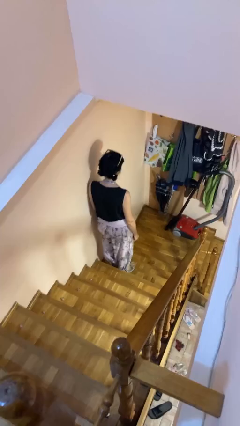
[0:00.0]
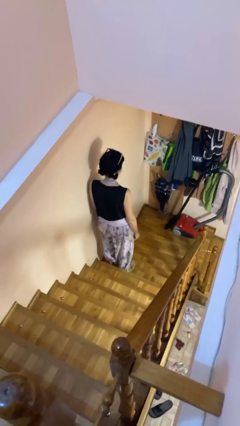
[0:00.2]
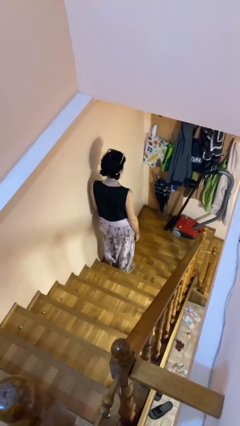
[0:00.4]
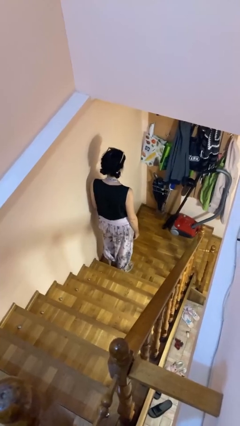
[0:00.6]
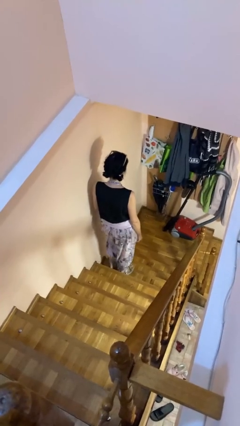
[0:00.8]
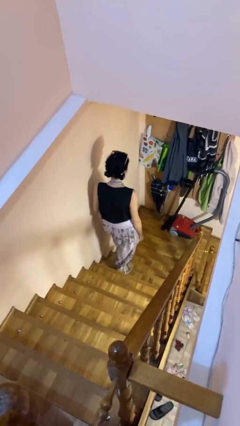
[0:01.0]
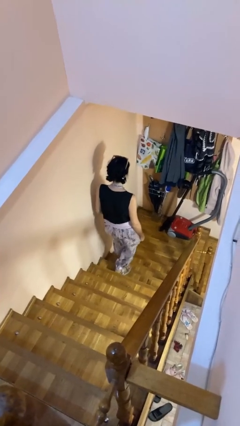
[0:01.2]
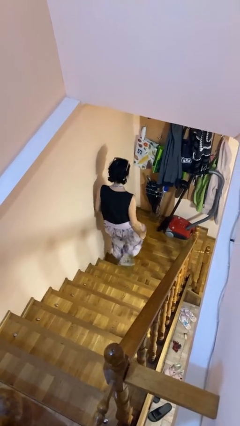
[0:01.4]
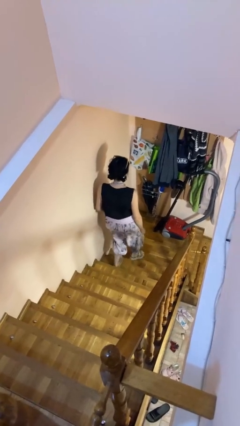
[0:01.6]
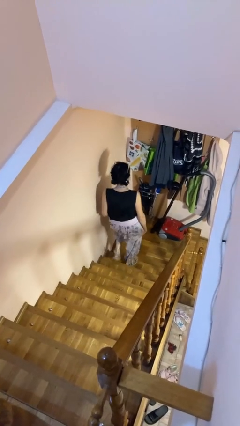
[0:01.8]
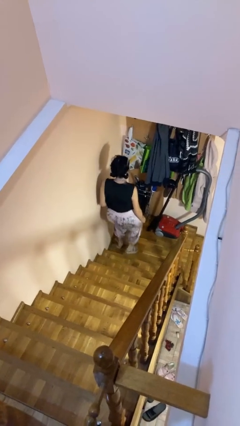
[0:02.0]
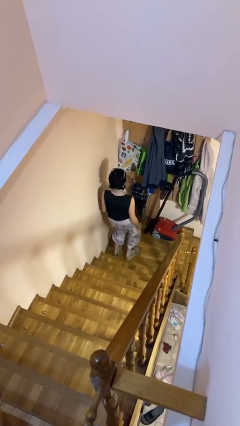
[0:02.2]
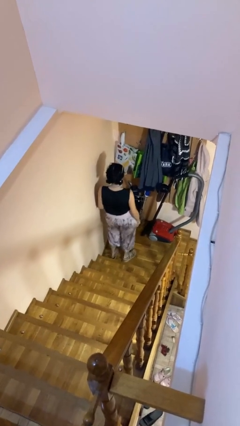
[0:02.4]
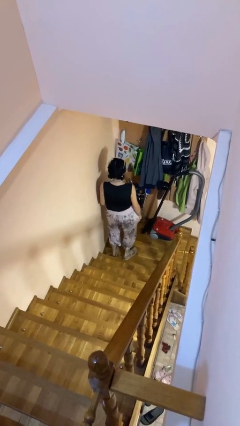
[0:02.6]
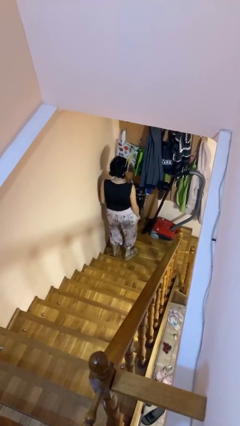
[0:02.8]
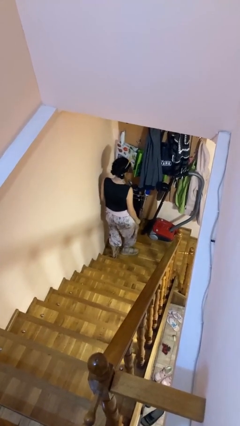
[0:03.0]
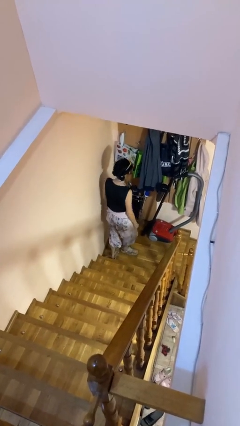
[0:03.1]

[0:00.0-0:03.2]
person climbs down stairs

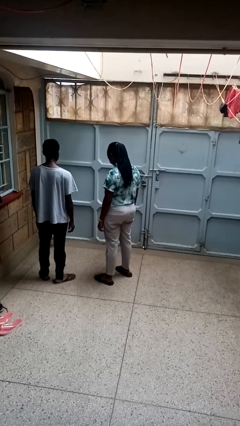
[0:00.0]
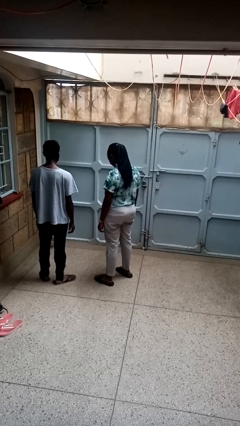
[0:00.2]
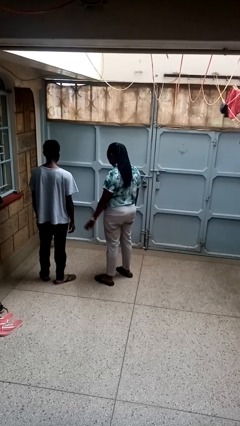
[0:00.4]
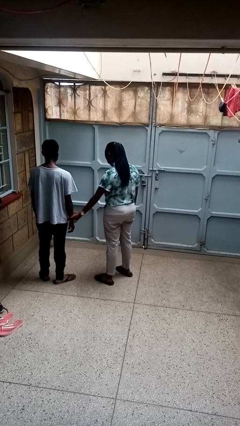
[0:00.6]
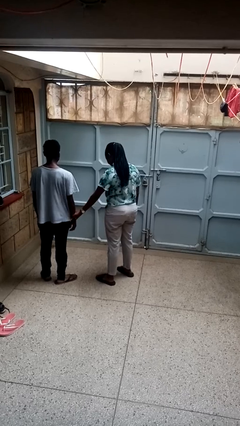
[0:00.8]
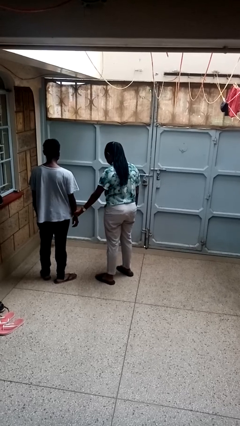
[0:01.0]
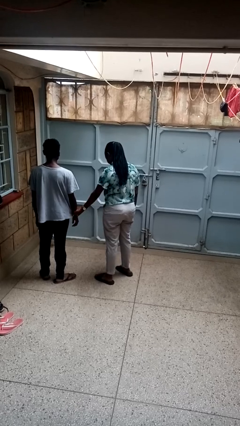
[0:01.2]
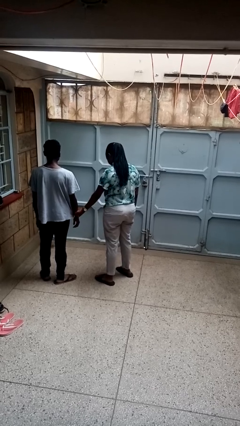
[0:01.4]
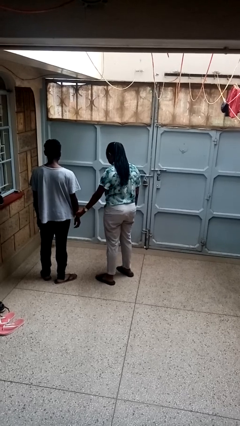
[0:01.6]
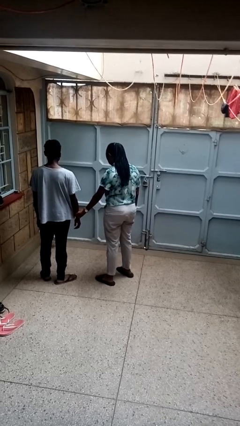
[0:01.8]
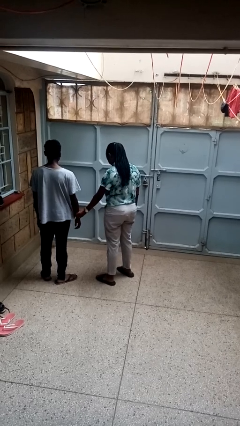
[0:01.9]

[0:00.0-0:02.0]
person grabs person by forearm

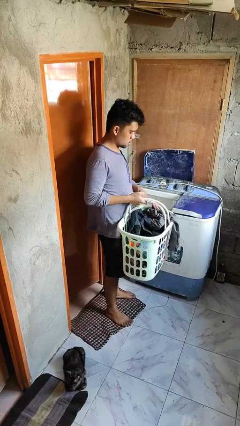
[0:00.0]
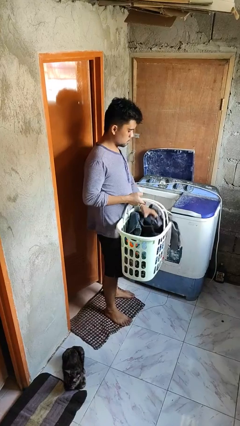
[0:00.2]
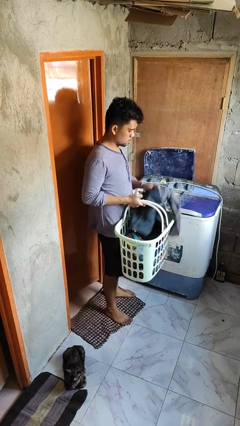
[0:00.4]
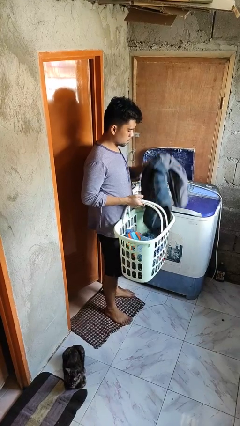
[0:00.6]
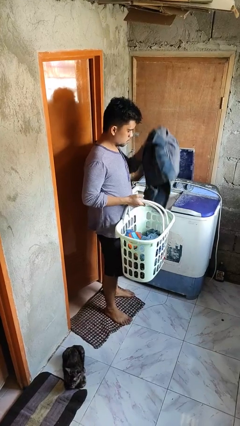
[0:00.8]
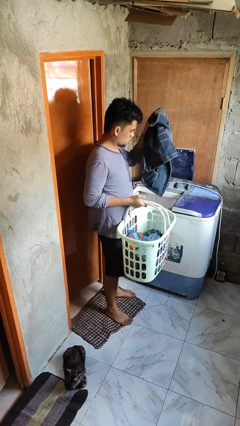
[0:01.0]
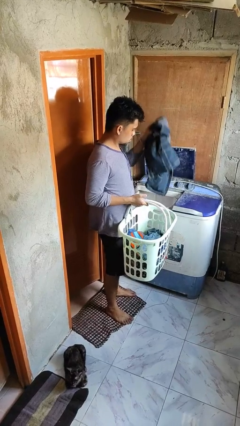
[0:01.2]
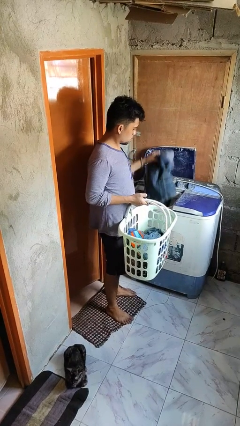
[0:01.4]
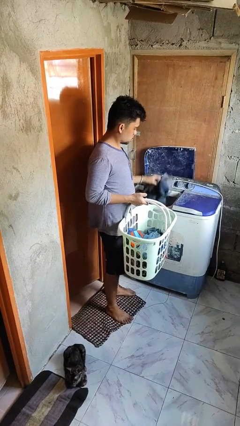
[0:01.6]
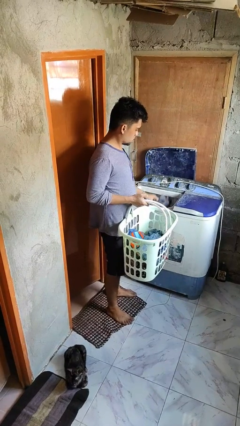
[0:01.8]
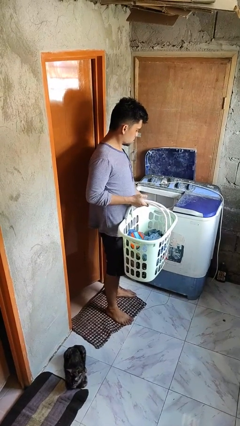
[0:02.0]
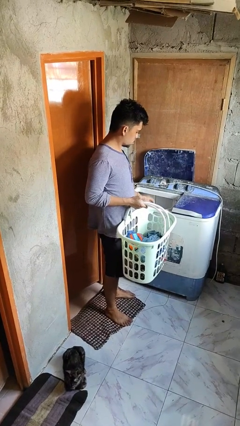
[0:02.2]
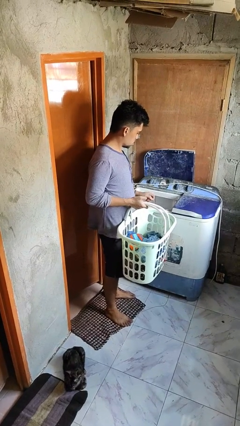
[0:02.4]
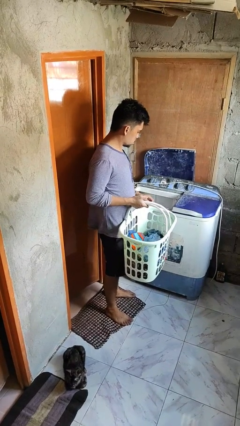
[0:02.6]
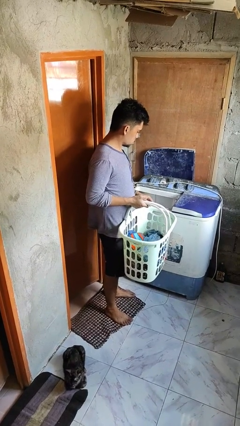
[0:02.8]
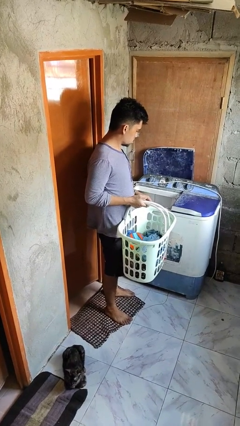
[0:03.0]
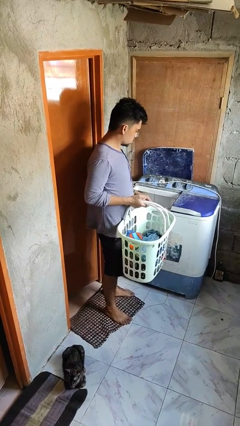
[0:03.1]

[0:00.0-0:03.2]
person loads clotheswasher

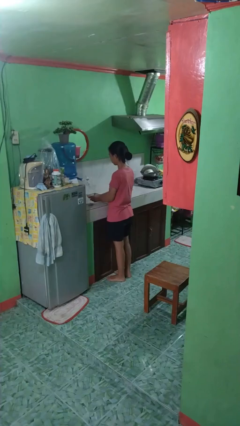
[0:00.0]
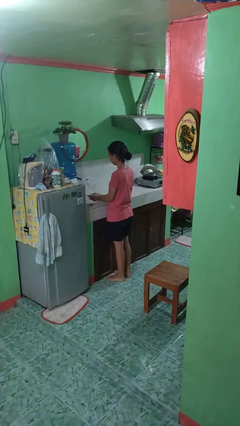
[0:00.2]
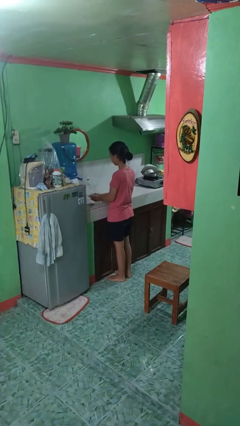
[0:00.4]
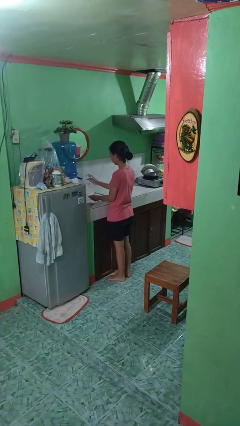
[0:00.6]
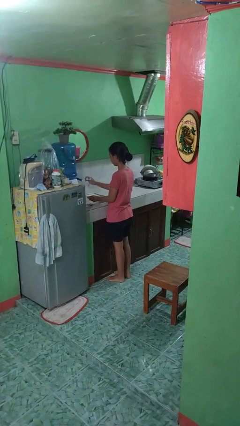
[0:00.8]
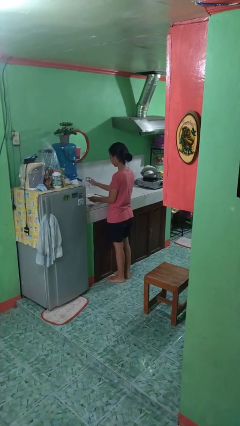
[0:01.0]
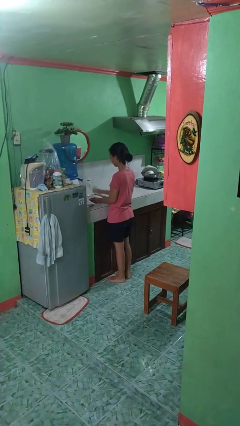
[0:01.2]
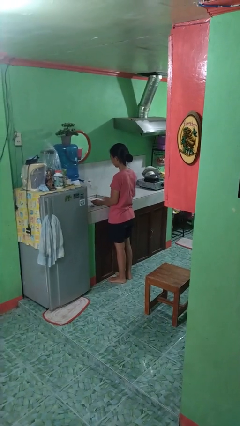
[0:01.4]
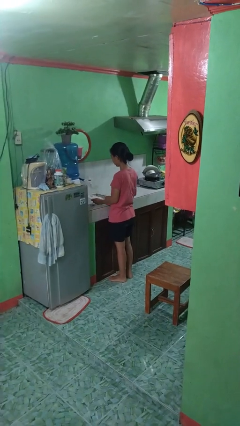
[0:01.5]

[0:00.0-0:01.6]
person washes dish

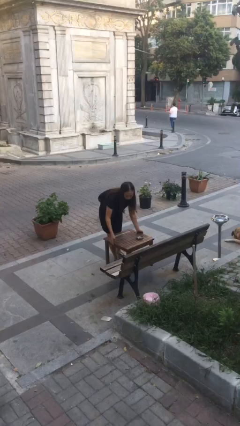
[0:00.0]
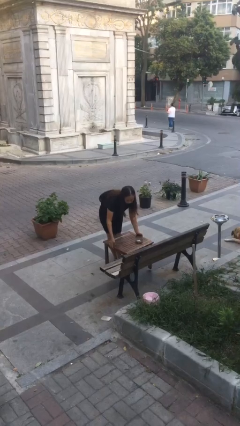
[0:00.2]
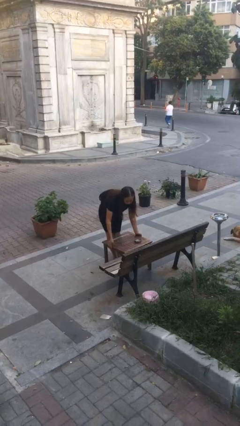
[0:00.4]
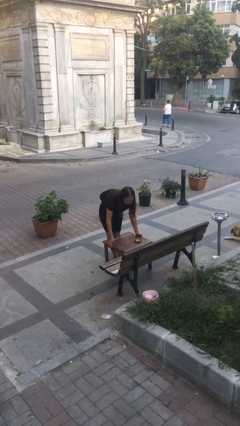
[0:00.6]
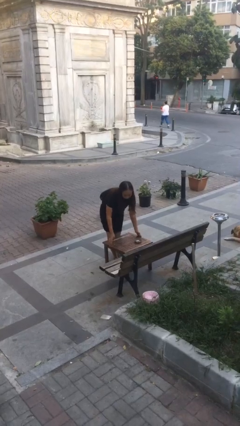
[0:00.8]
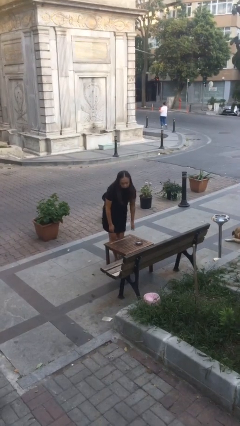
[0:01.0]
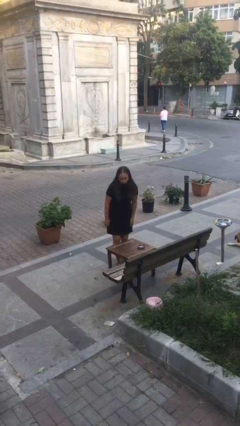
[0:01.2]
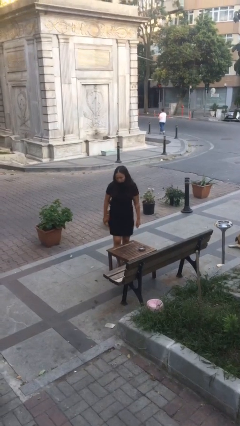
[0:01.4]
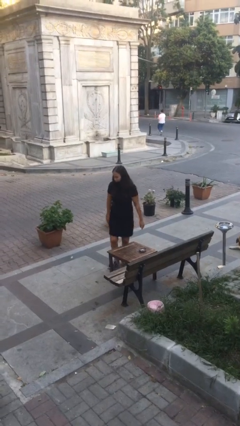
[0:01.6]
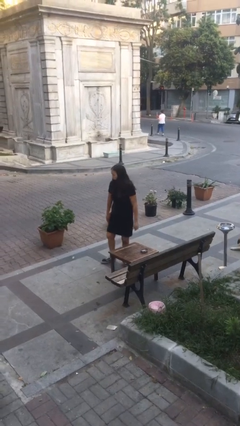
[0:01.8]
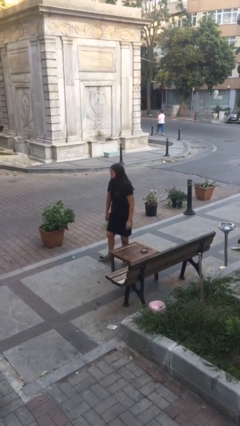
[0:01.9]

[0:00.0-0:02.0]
person puts down object on floor

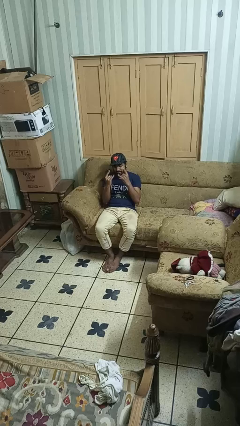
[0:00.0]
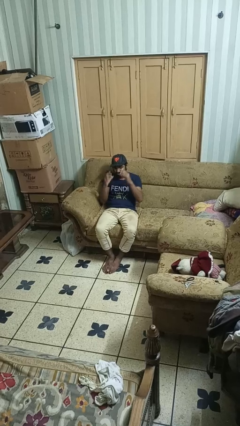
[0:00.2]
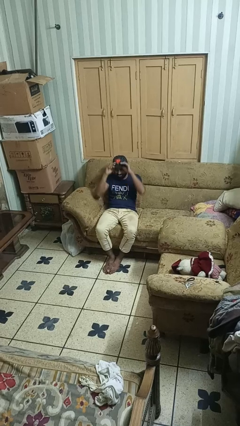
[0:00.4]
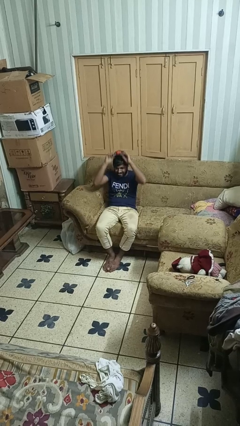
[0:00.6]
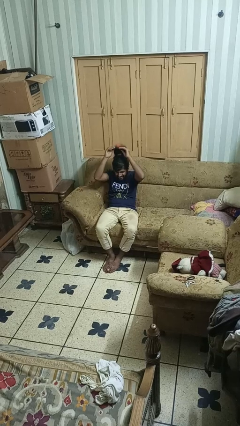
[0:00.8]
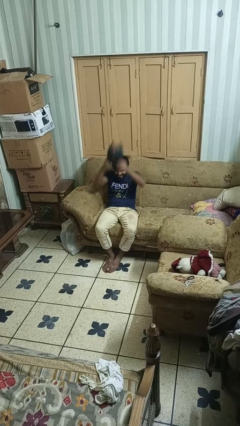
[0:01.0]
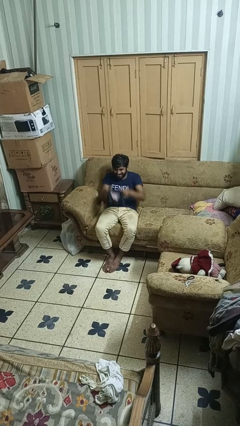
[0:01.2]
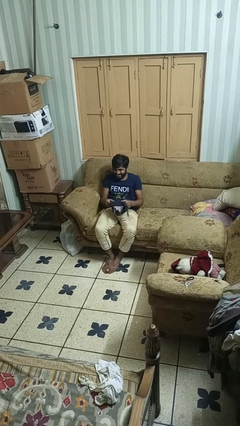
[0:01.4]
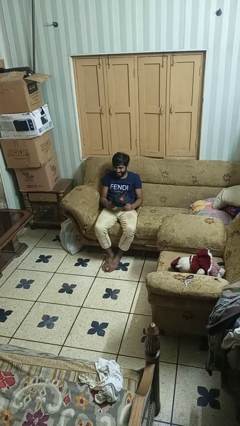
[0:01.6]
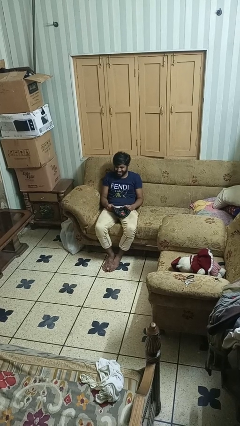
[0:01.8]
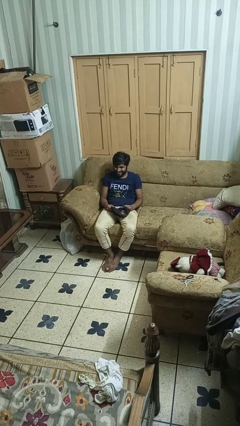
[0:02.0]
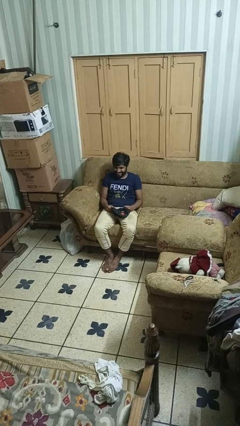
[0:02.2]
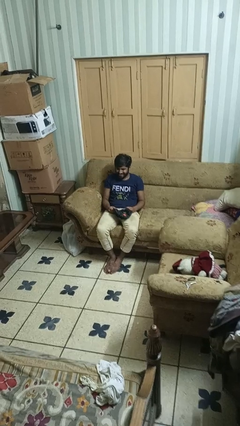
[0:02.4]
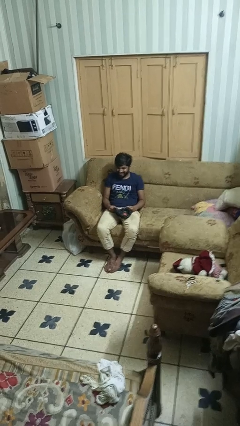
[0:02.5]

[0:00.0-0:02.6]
person takes off hat

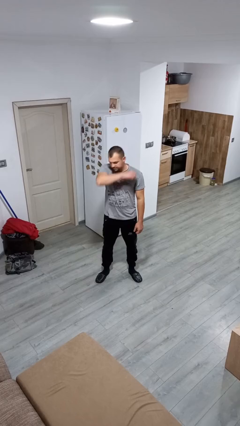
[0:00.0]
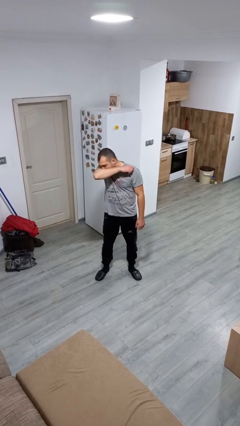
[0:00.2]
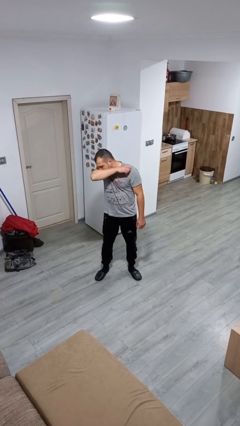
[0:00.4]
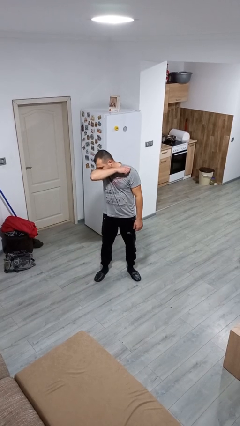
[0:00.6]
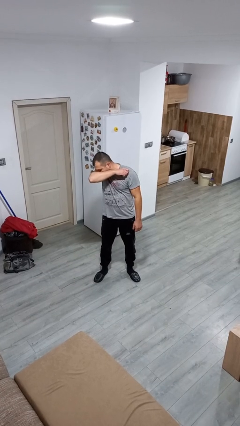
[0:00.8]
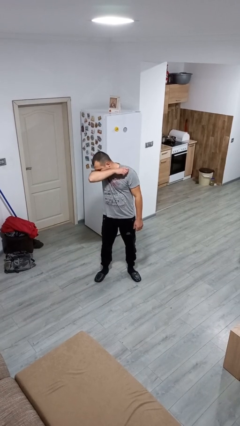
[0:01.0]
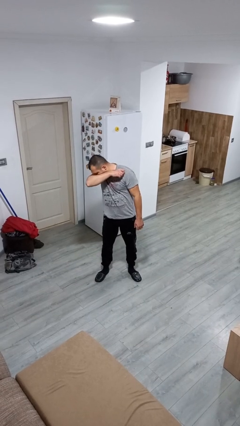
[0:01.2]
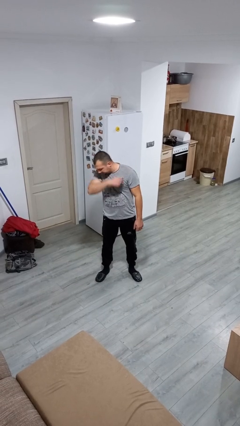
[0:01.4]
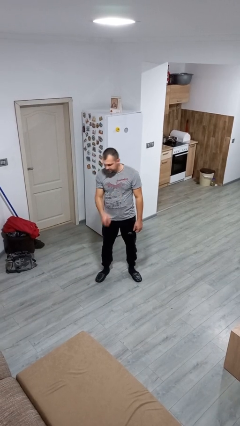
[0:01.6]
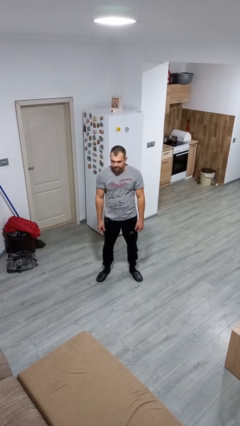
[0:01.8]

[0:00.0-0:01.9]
person sneezes into arm

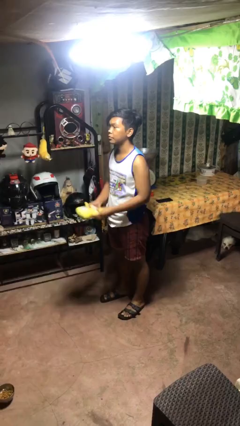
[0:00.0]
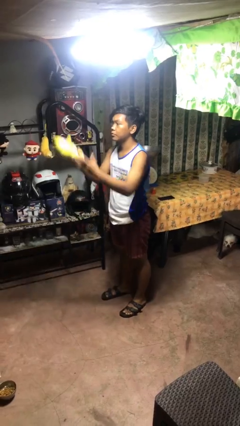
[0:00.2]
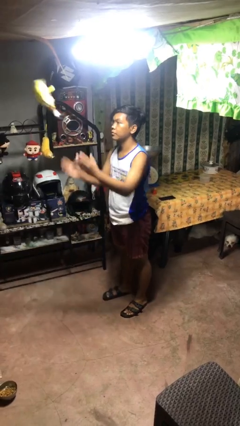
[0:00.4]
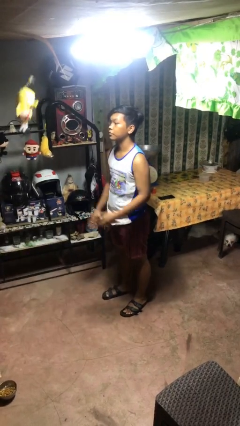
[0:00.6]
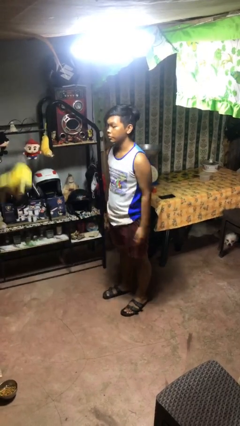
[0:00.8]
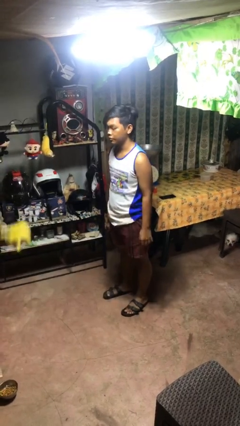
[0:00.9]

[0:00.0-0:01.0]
person throws object into air
